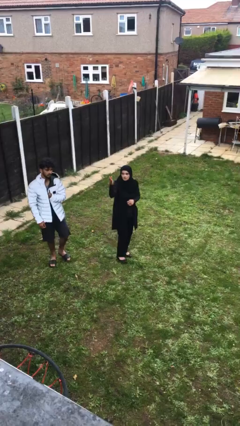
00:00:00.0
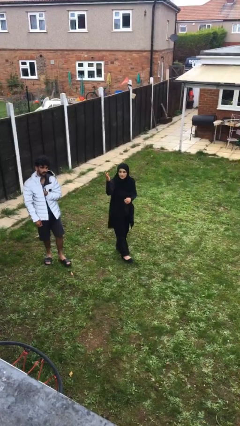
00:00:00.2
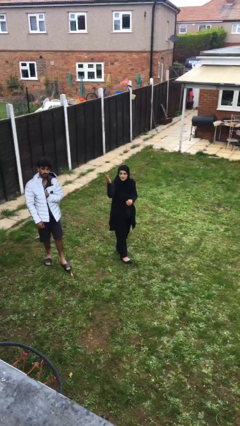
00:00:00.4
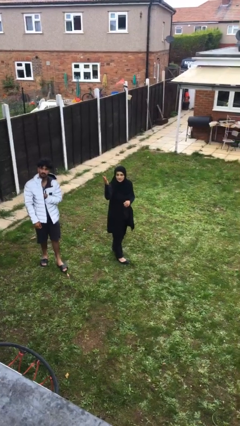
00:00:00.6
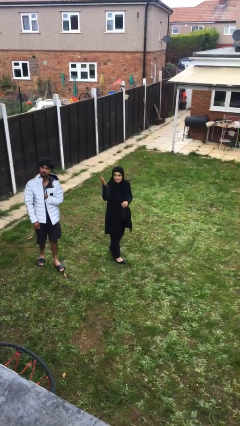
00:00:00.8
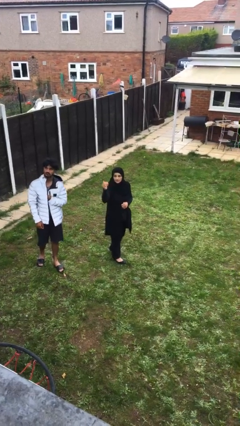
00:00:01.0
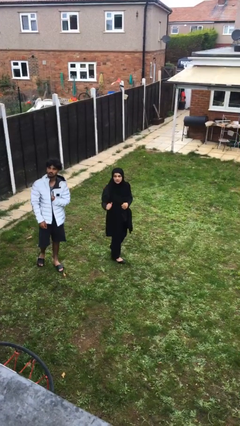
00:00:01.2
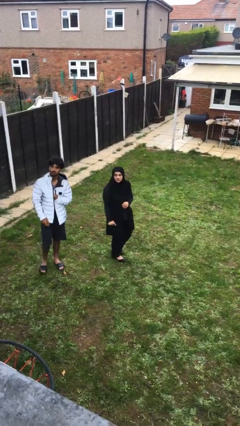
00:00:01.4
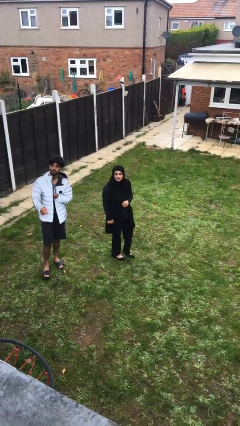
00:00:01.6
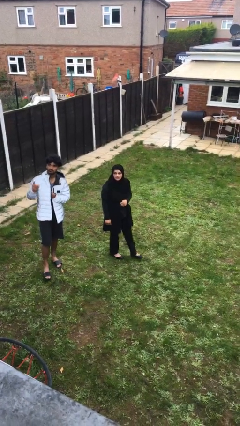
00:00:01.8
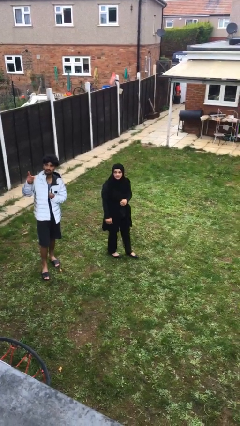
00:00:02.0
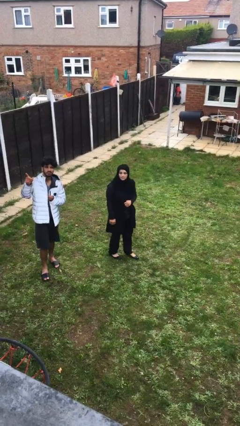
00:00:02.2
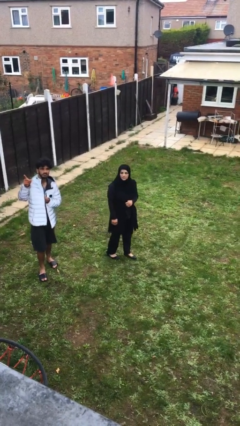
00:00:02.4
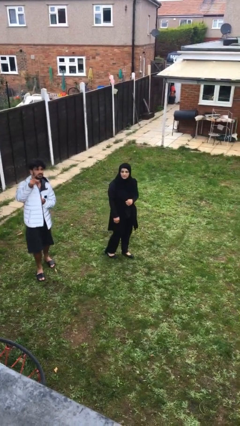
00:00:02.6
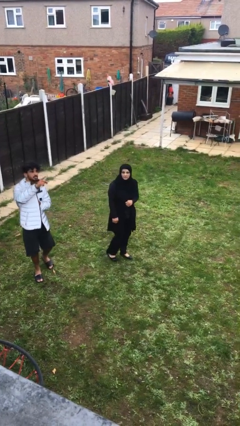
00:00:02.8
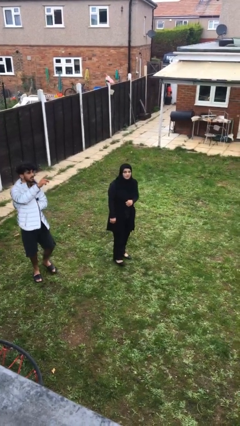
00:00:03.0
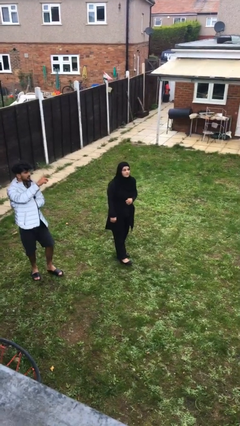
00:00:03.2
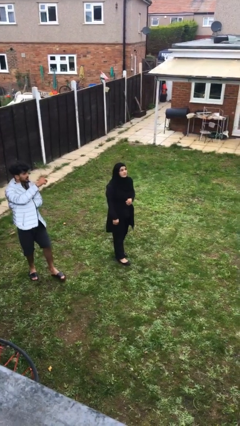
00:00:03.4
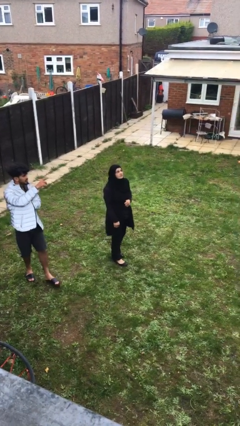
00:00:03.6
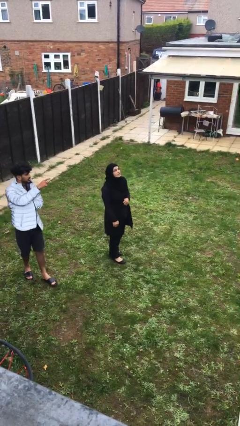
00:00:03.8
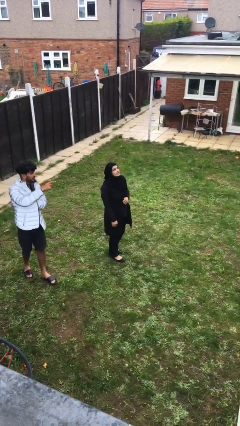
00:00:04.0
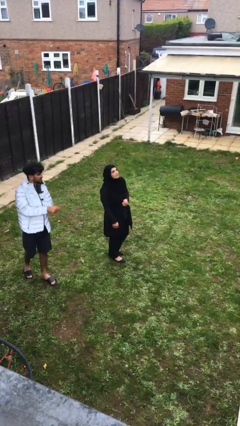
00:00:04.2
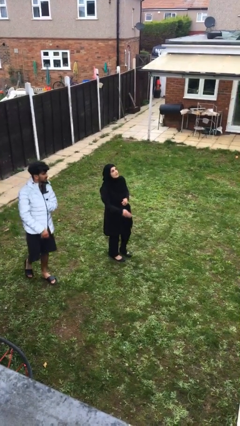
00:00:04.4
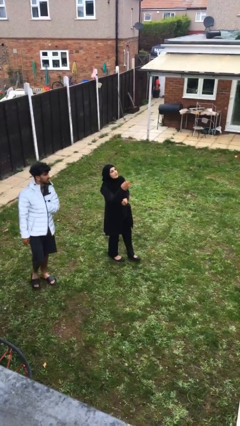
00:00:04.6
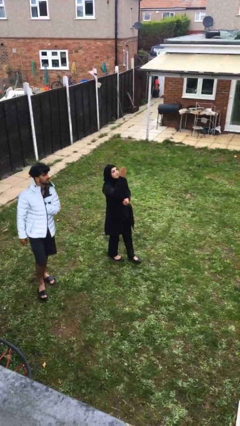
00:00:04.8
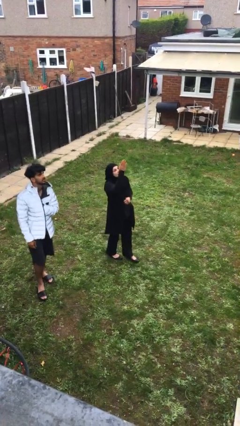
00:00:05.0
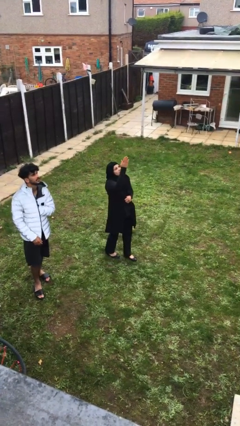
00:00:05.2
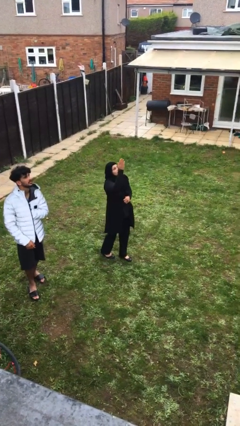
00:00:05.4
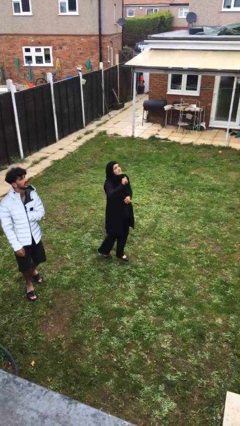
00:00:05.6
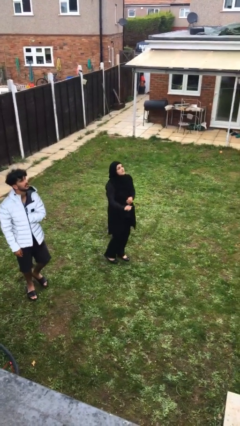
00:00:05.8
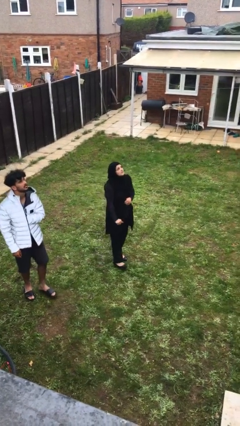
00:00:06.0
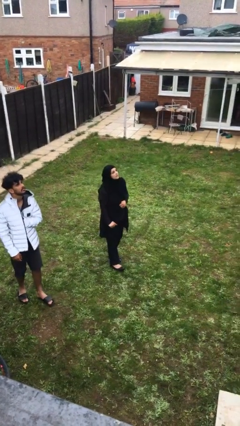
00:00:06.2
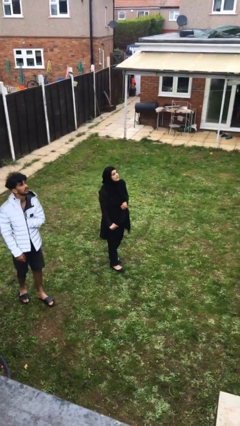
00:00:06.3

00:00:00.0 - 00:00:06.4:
person talks to person

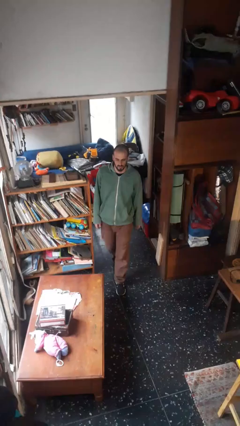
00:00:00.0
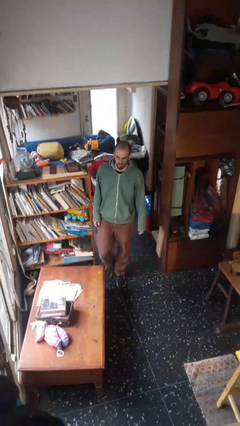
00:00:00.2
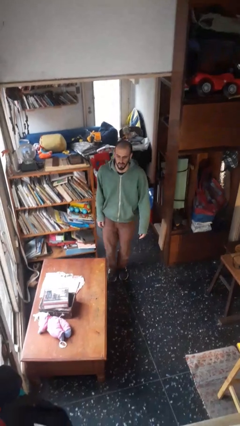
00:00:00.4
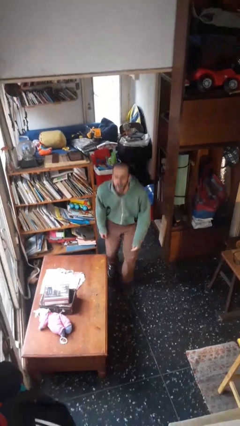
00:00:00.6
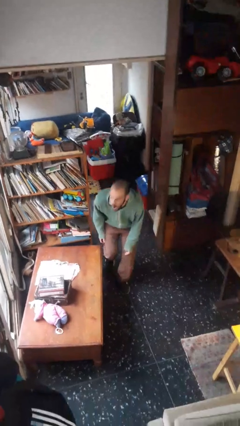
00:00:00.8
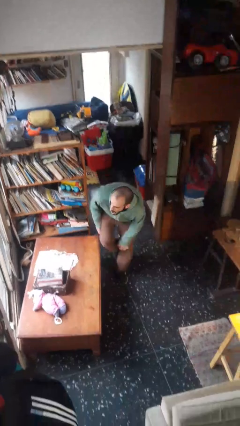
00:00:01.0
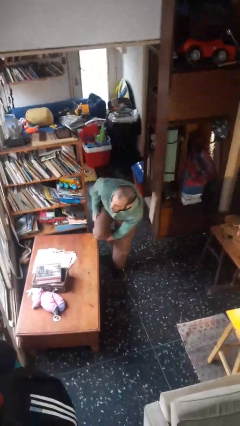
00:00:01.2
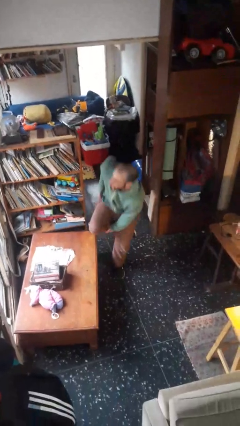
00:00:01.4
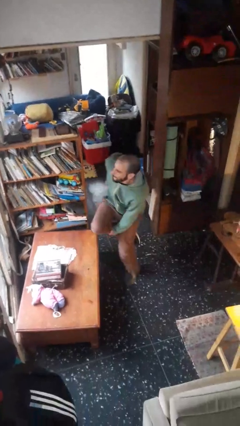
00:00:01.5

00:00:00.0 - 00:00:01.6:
person bumps into table

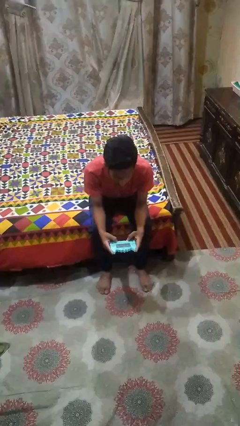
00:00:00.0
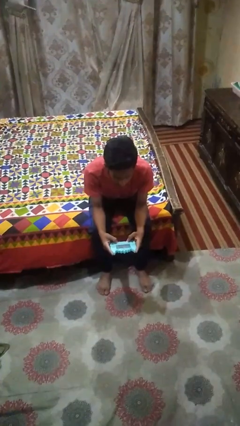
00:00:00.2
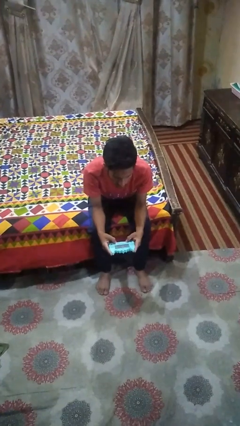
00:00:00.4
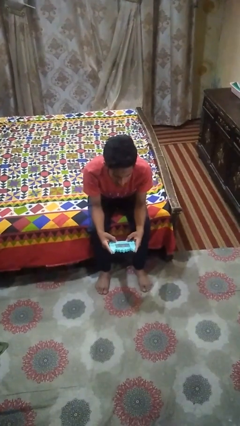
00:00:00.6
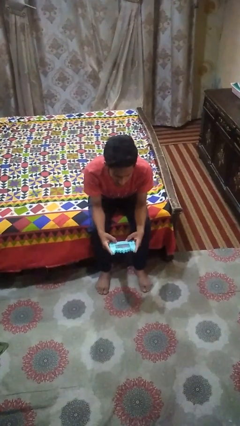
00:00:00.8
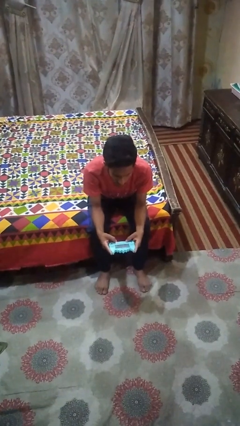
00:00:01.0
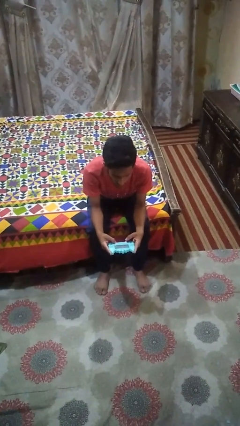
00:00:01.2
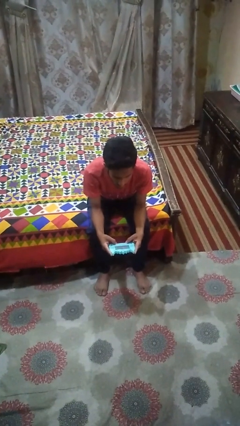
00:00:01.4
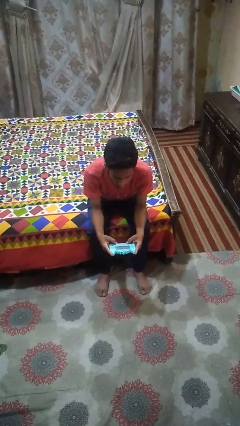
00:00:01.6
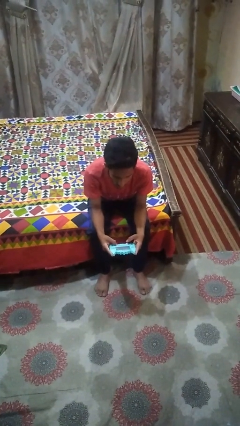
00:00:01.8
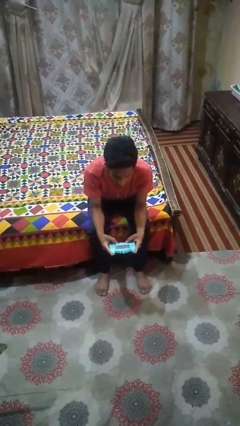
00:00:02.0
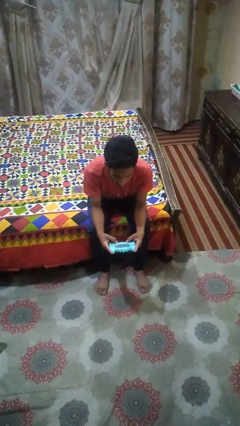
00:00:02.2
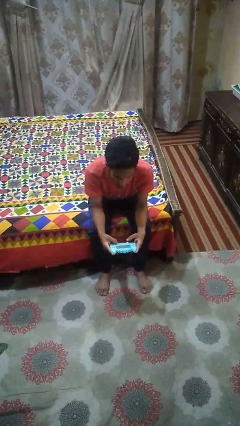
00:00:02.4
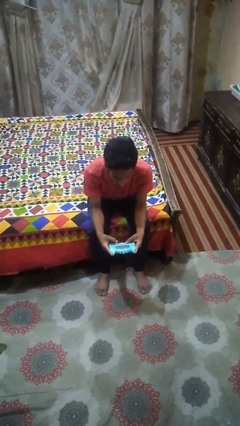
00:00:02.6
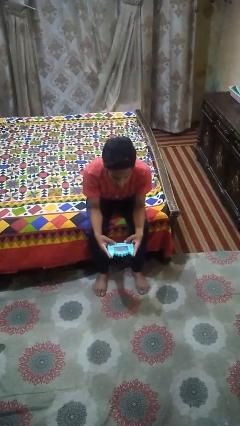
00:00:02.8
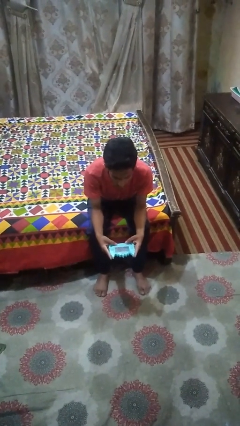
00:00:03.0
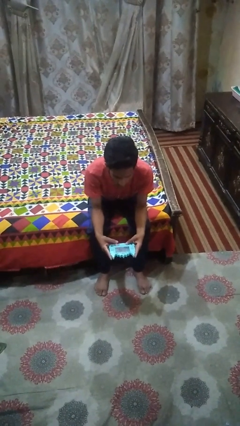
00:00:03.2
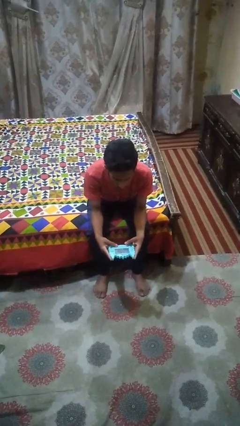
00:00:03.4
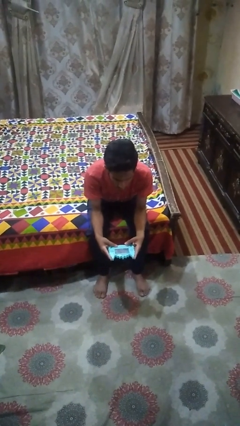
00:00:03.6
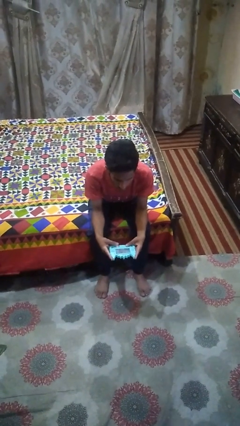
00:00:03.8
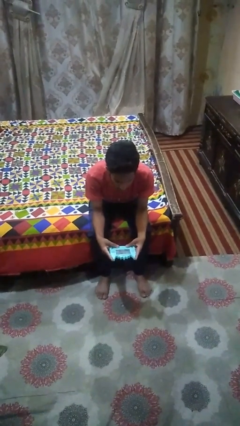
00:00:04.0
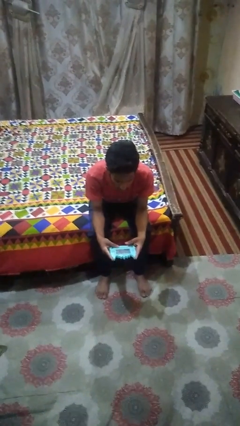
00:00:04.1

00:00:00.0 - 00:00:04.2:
person interacts with handheld game

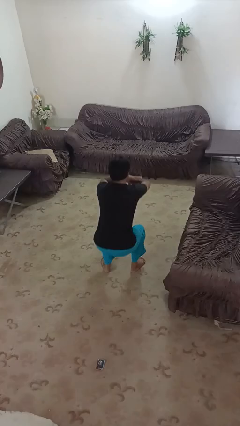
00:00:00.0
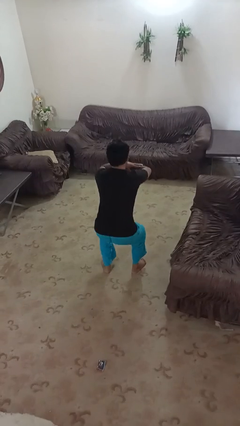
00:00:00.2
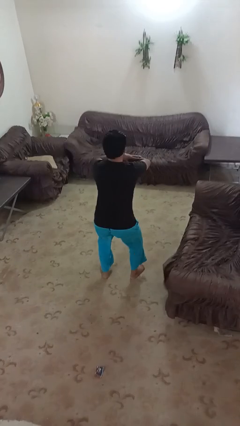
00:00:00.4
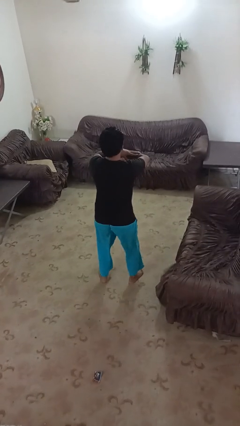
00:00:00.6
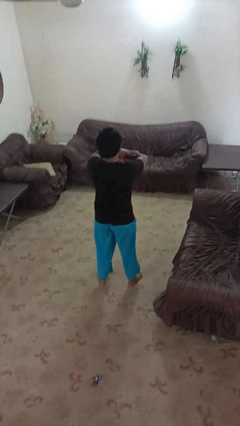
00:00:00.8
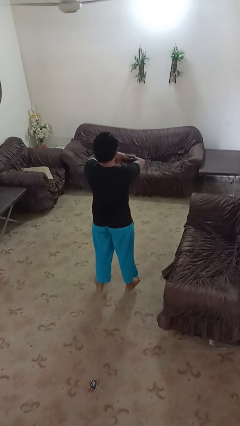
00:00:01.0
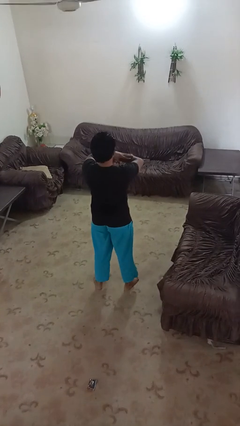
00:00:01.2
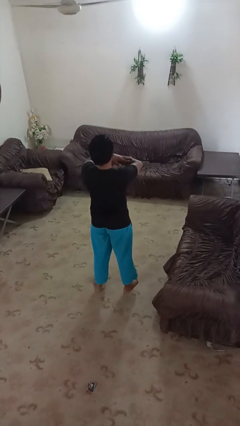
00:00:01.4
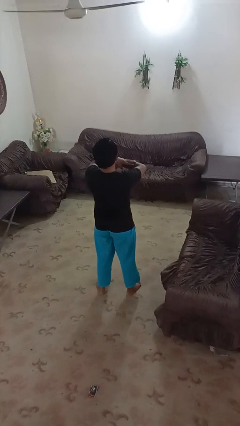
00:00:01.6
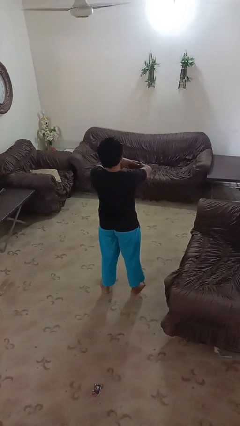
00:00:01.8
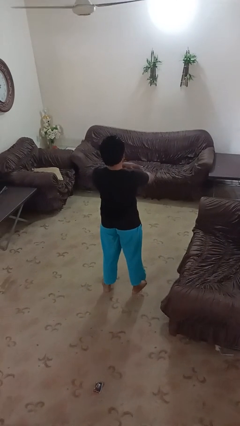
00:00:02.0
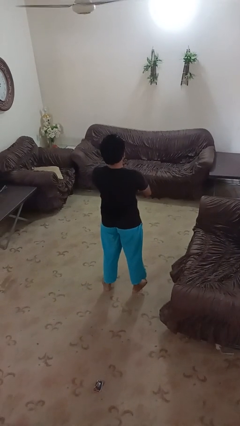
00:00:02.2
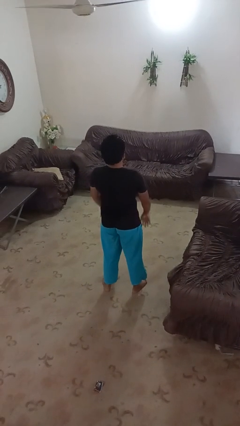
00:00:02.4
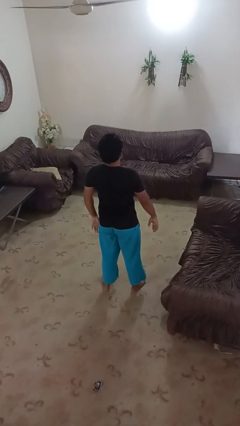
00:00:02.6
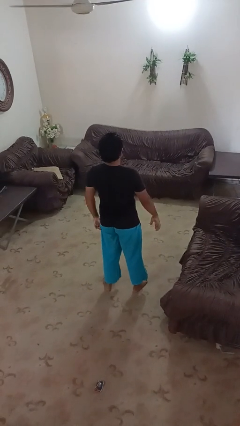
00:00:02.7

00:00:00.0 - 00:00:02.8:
person stands up

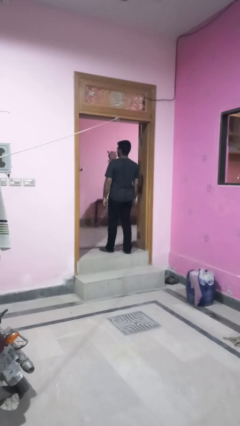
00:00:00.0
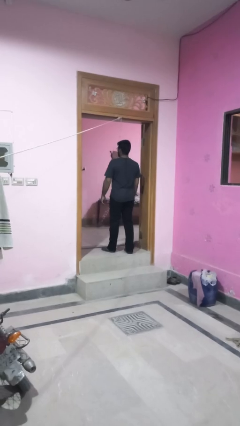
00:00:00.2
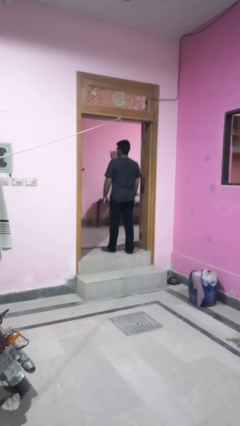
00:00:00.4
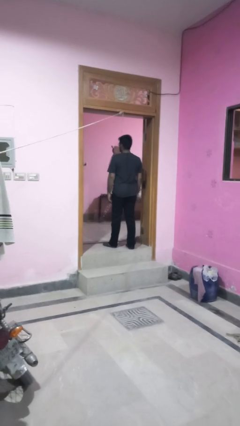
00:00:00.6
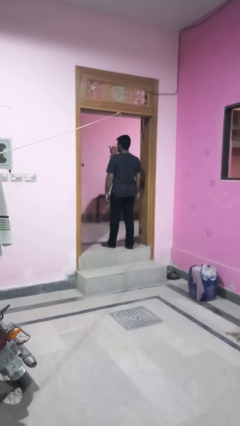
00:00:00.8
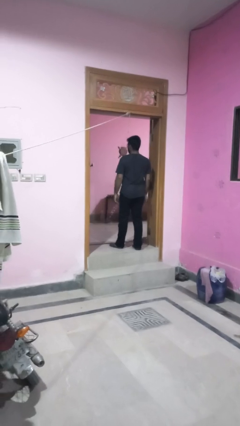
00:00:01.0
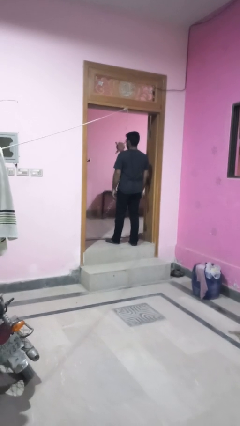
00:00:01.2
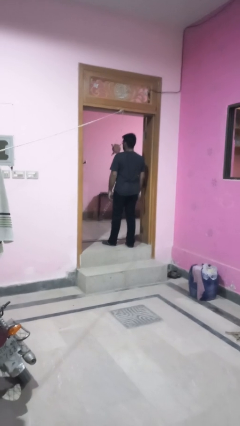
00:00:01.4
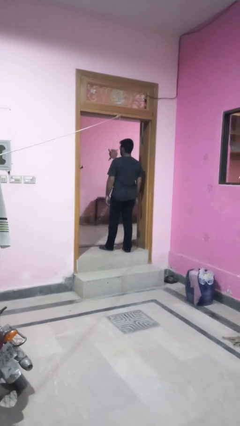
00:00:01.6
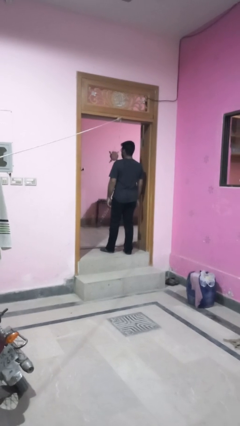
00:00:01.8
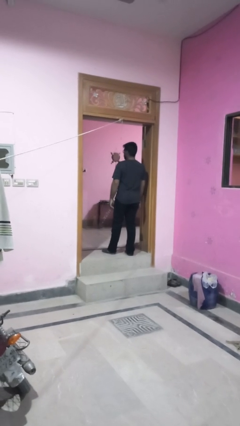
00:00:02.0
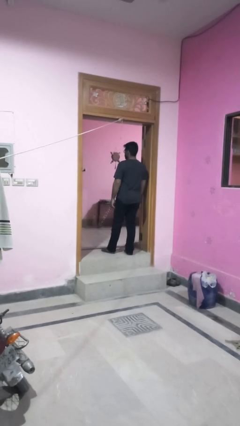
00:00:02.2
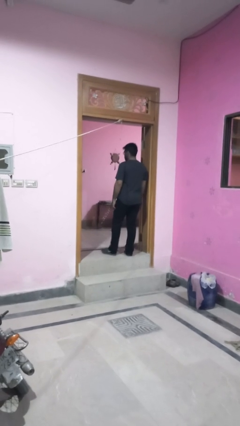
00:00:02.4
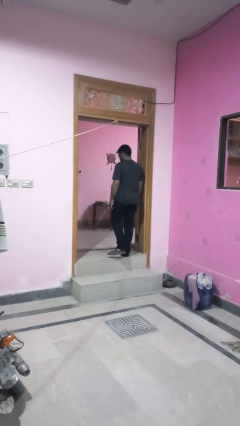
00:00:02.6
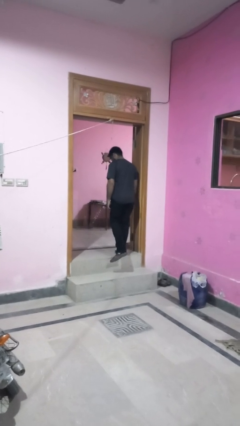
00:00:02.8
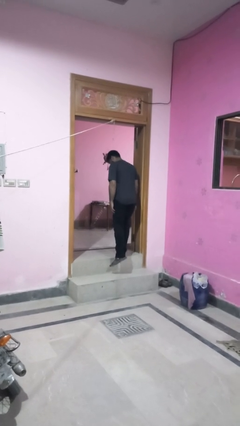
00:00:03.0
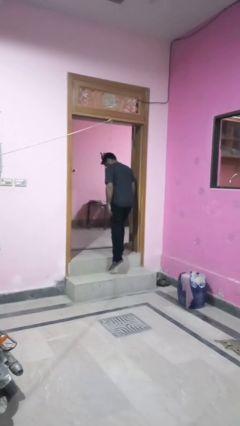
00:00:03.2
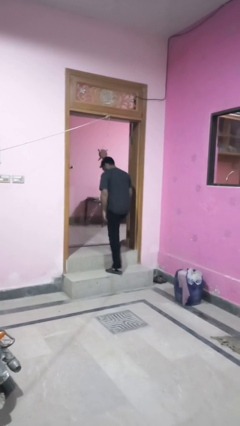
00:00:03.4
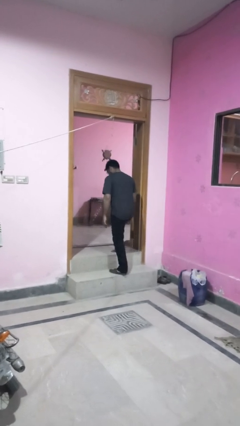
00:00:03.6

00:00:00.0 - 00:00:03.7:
person takes off necklace
